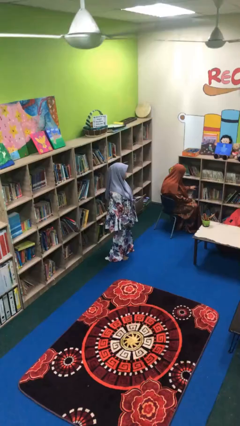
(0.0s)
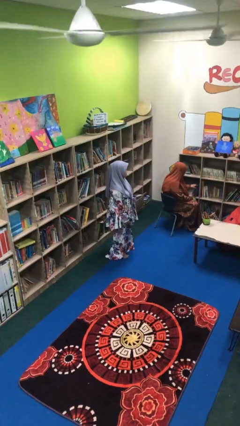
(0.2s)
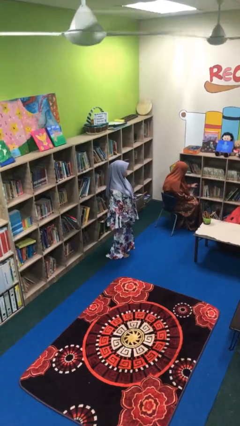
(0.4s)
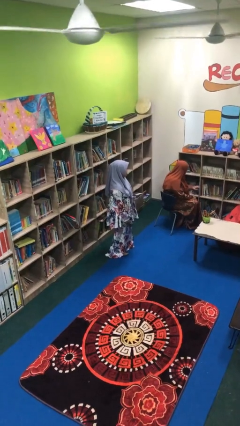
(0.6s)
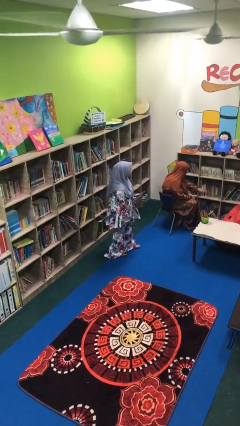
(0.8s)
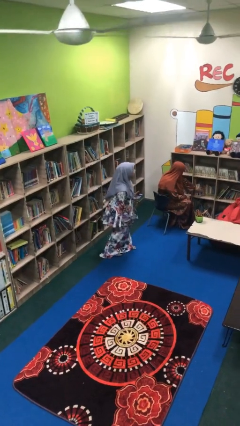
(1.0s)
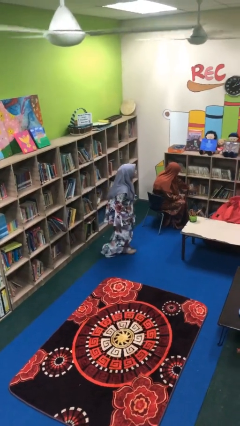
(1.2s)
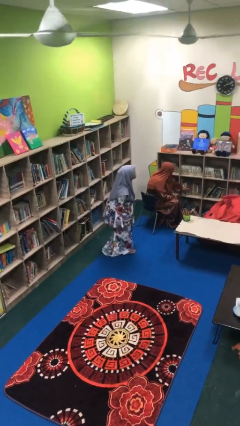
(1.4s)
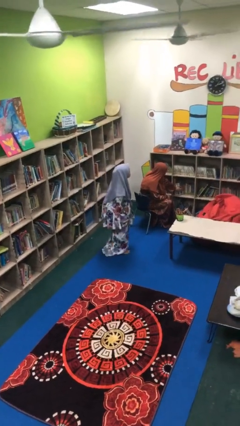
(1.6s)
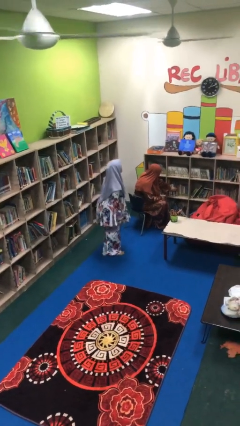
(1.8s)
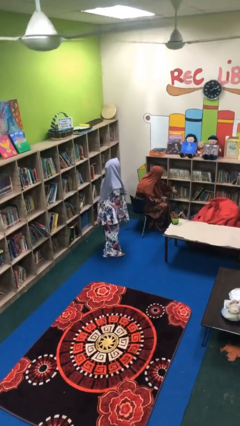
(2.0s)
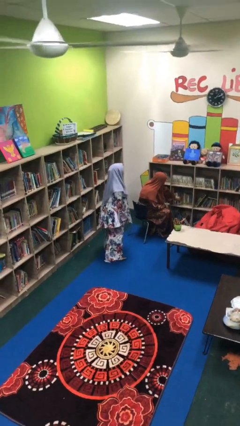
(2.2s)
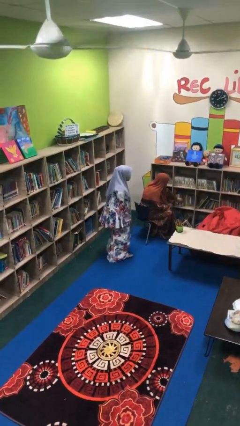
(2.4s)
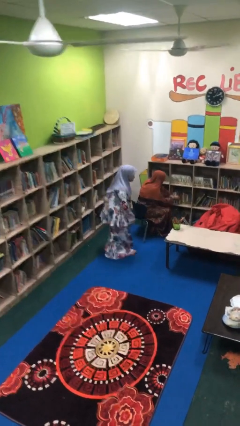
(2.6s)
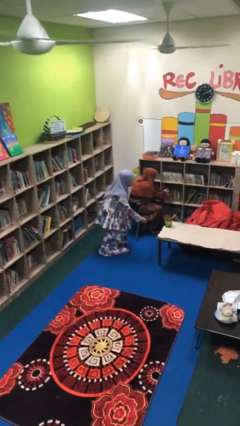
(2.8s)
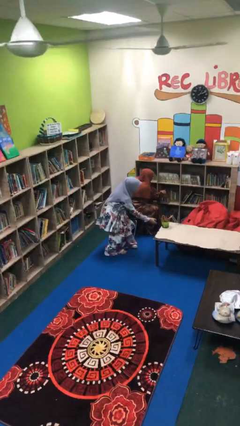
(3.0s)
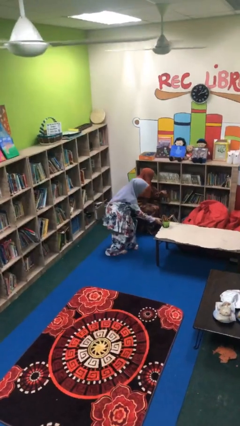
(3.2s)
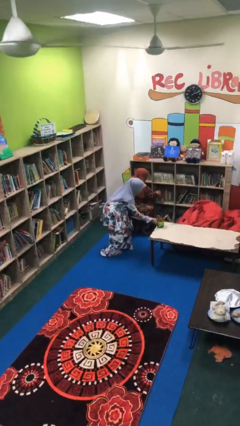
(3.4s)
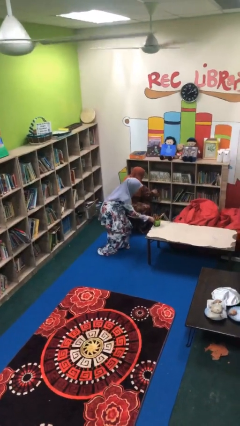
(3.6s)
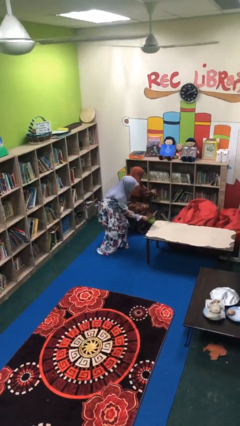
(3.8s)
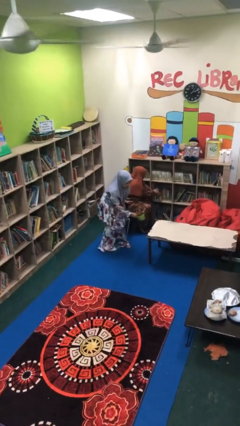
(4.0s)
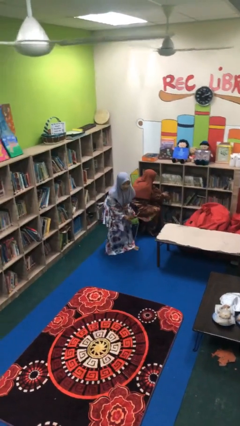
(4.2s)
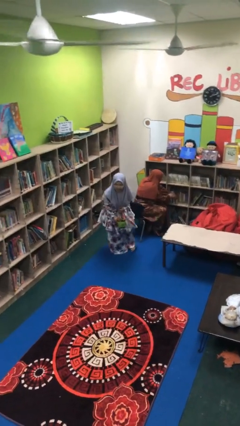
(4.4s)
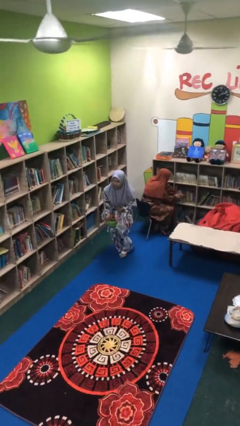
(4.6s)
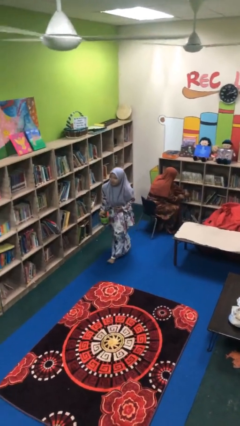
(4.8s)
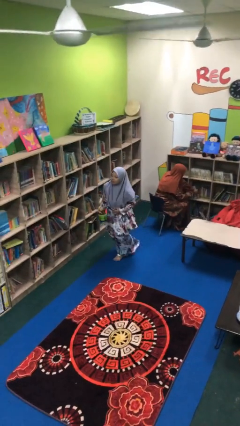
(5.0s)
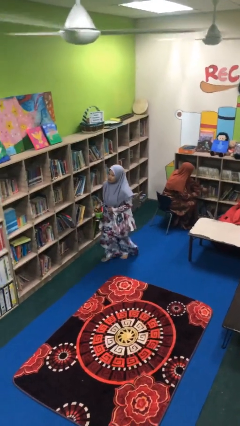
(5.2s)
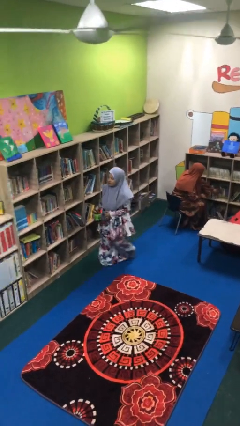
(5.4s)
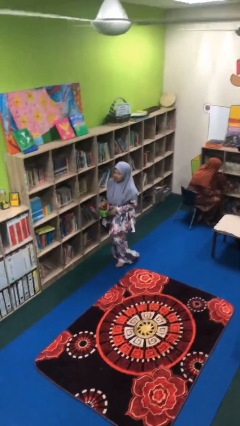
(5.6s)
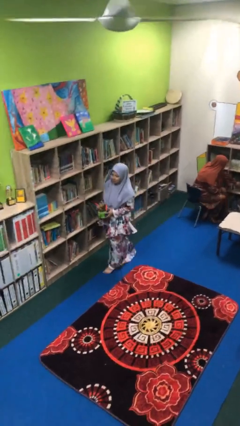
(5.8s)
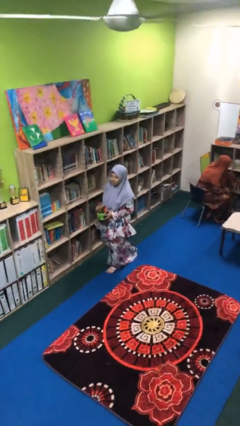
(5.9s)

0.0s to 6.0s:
person steals object from person

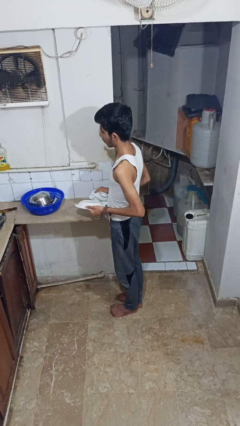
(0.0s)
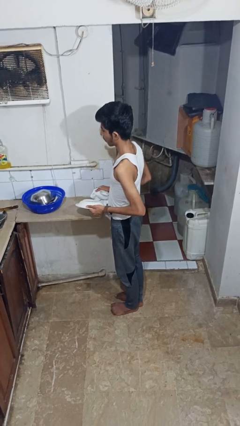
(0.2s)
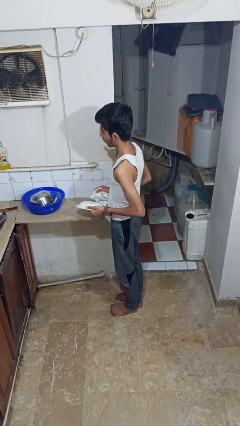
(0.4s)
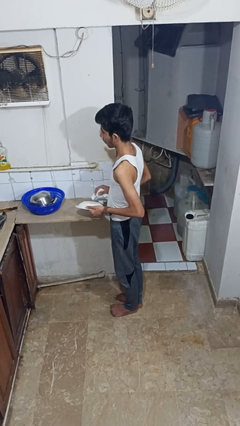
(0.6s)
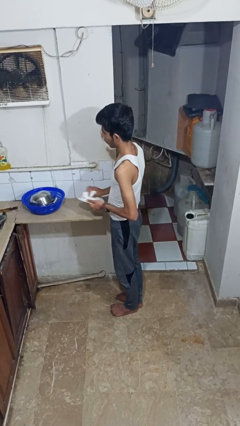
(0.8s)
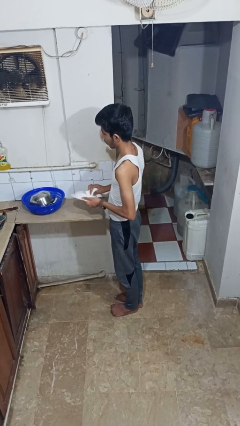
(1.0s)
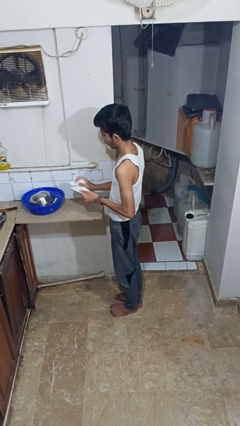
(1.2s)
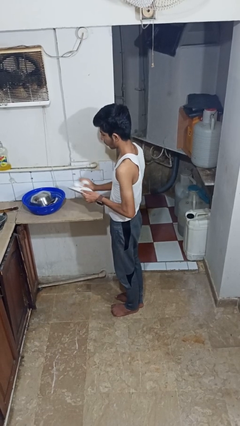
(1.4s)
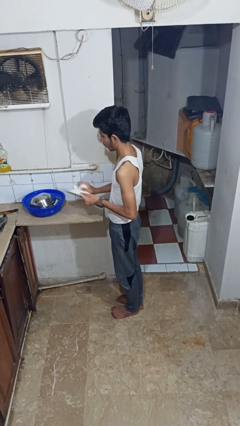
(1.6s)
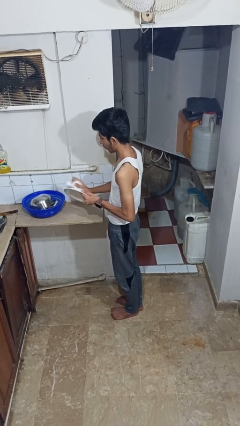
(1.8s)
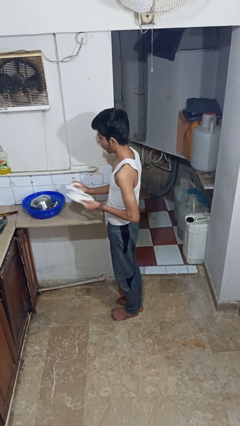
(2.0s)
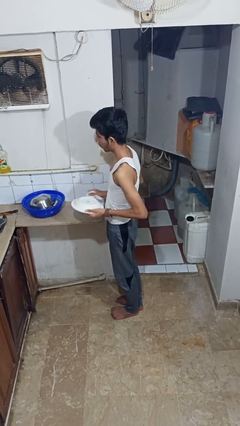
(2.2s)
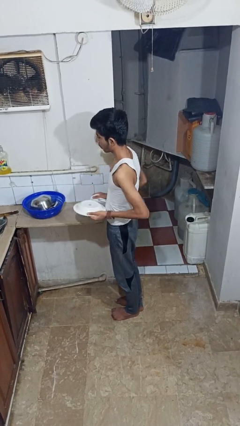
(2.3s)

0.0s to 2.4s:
person dries dish

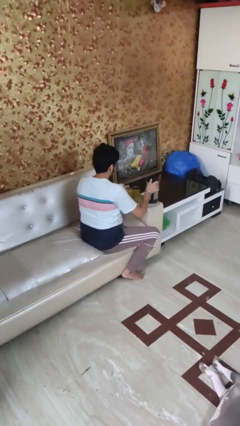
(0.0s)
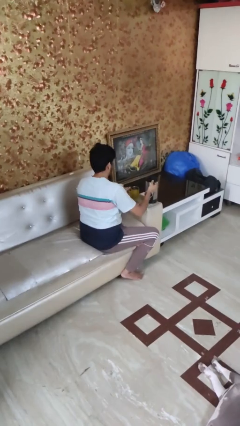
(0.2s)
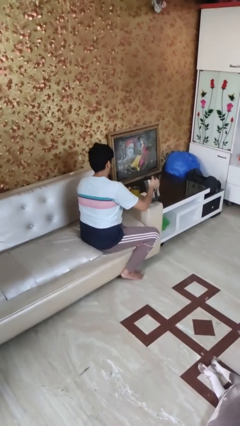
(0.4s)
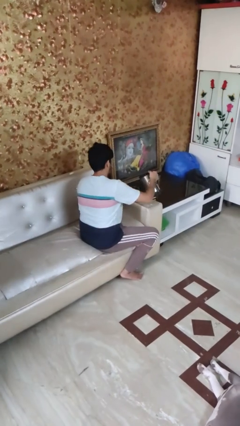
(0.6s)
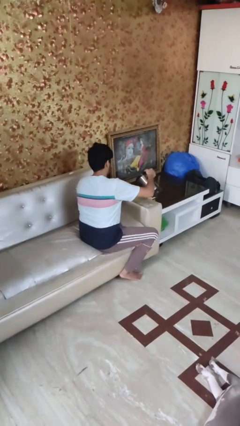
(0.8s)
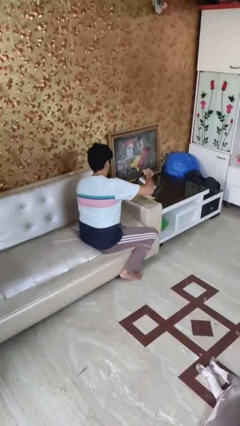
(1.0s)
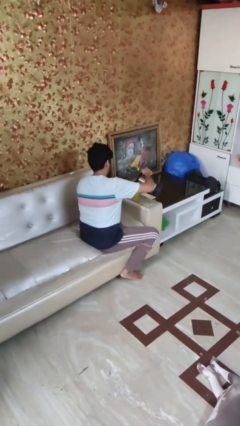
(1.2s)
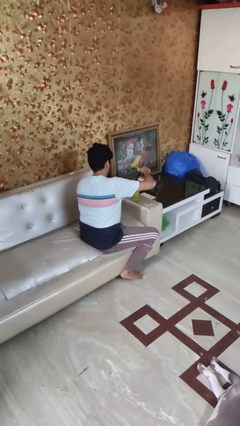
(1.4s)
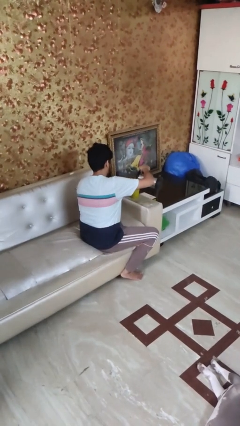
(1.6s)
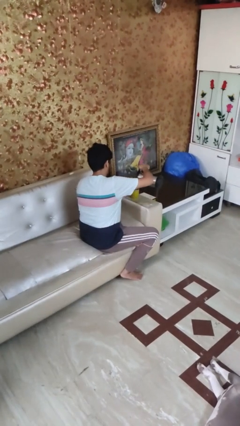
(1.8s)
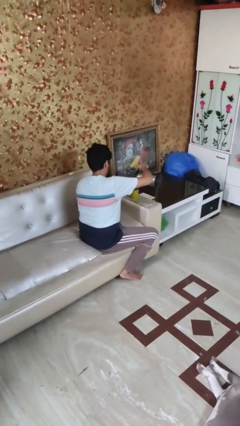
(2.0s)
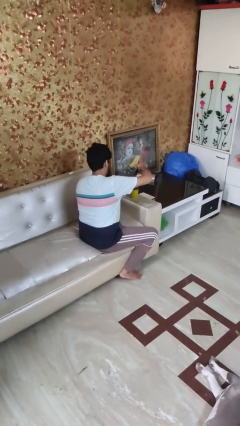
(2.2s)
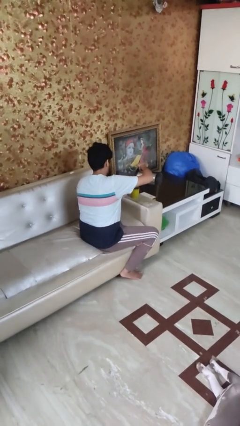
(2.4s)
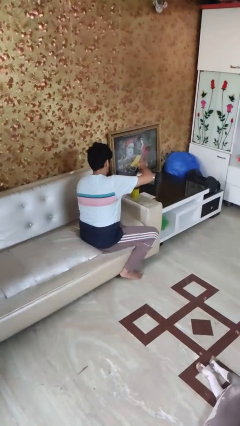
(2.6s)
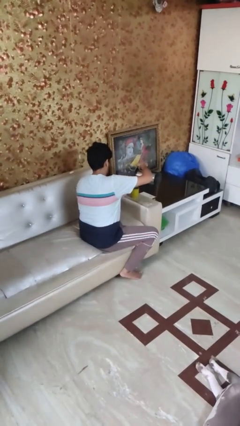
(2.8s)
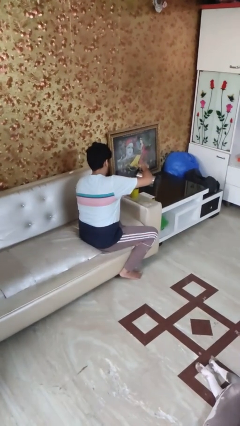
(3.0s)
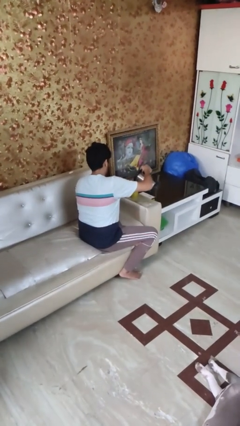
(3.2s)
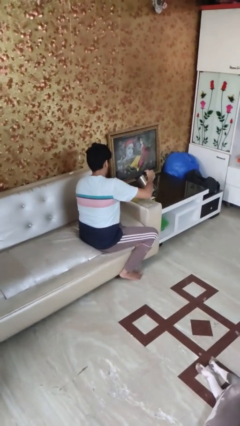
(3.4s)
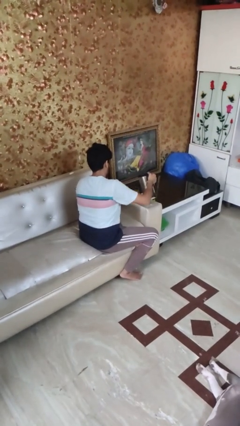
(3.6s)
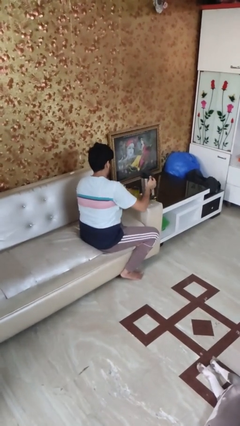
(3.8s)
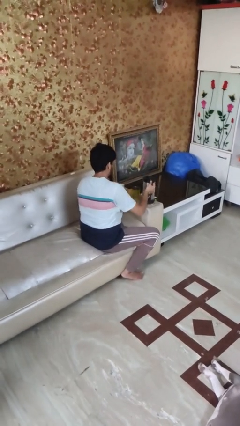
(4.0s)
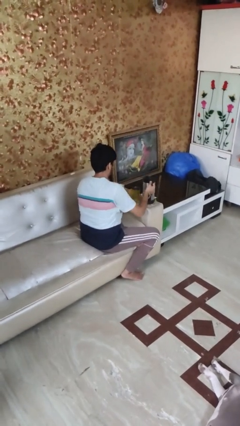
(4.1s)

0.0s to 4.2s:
person pours coffee into mug

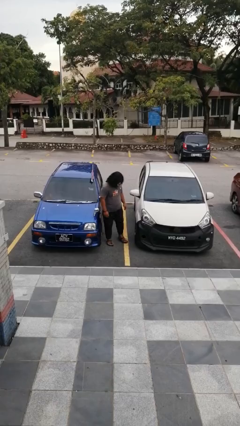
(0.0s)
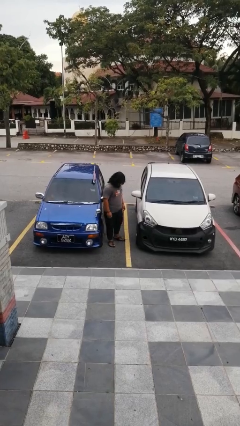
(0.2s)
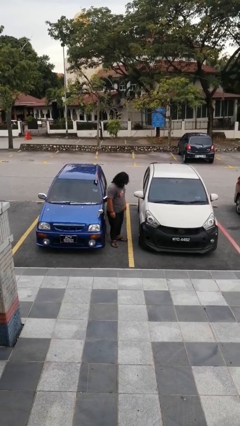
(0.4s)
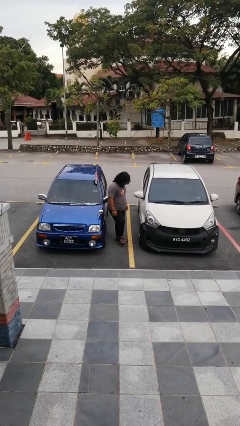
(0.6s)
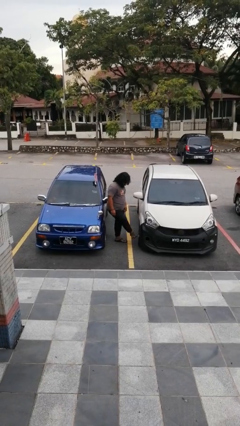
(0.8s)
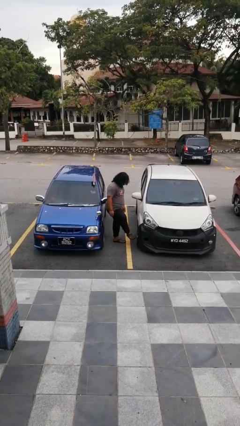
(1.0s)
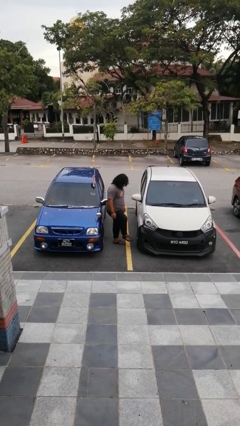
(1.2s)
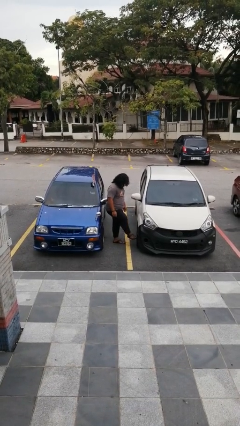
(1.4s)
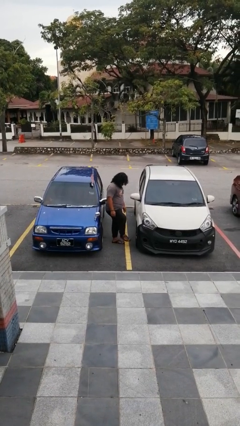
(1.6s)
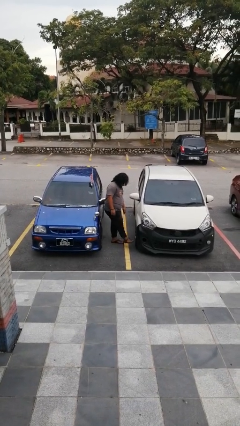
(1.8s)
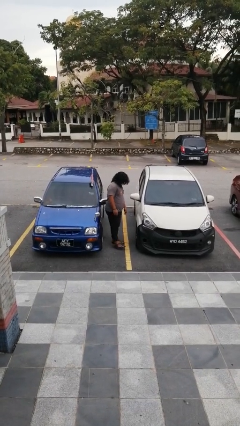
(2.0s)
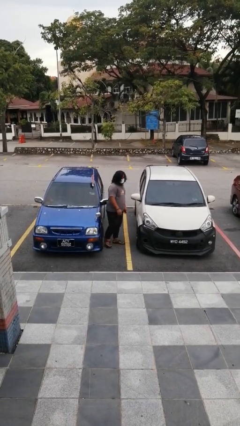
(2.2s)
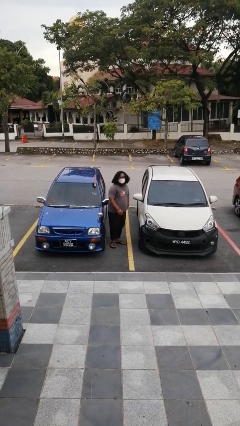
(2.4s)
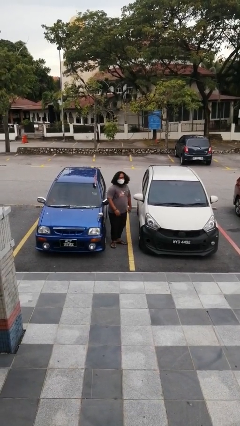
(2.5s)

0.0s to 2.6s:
person kicks car tires

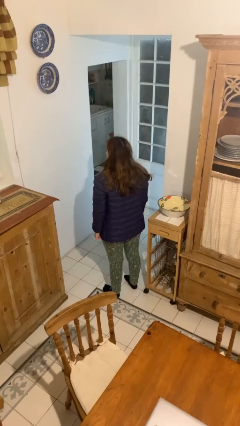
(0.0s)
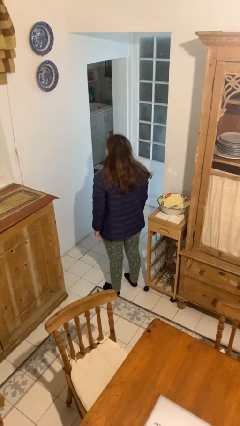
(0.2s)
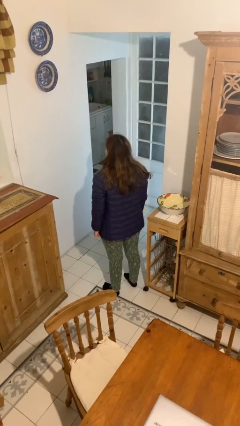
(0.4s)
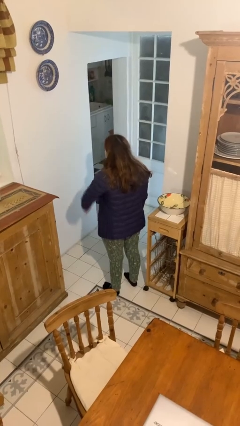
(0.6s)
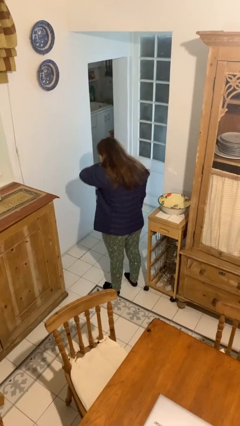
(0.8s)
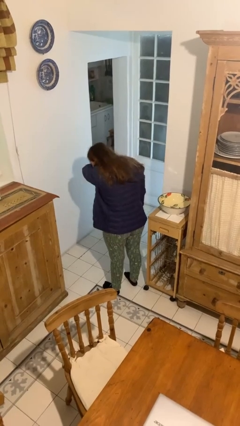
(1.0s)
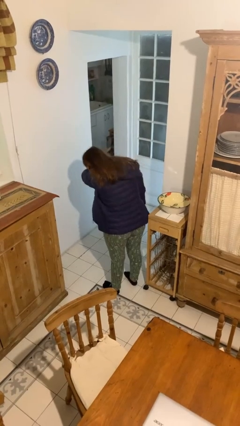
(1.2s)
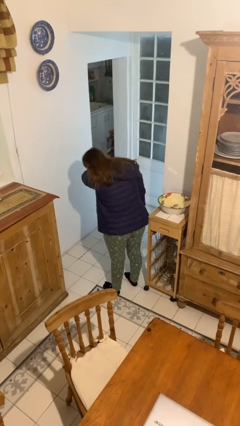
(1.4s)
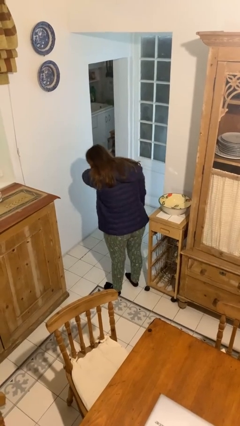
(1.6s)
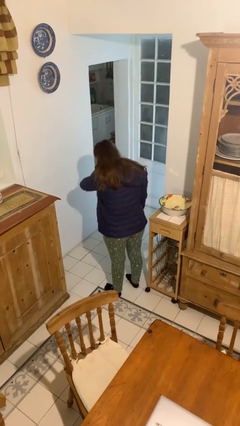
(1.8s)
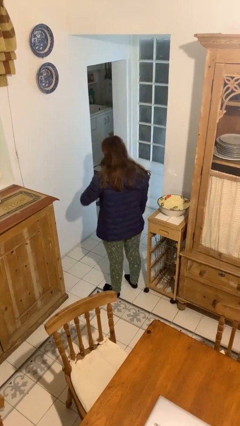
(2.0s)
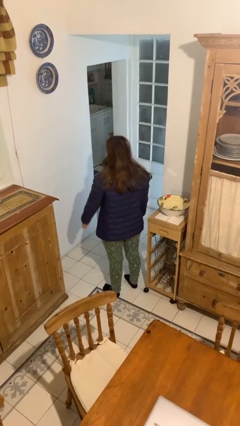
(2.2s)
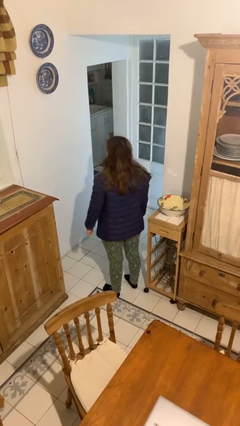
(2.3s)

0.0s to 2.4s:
person sneezes into arm

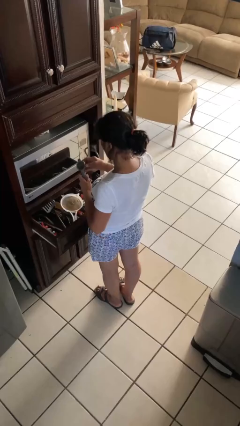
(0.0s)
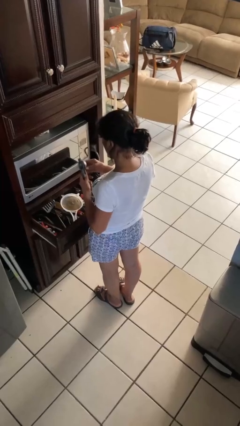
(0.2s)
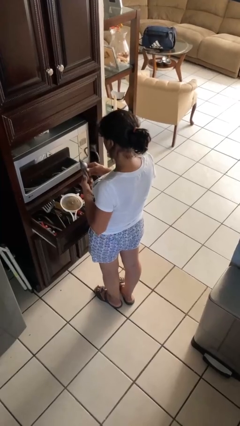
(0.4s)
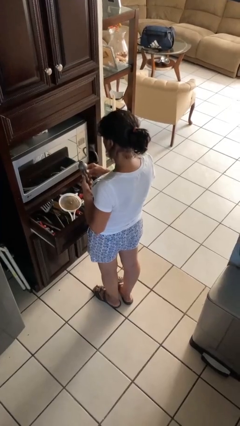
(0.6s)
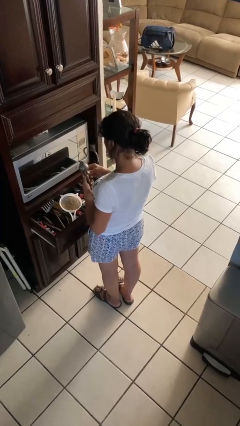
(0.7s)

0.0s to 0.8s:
person takes object from kitchen drawer
